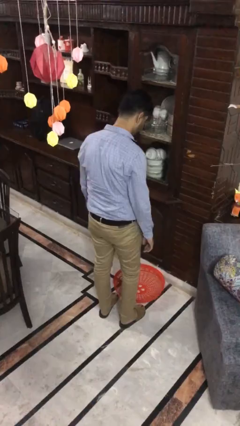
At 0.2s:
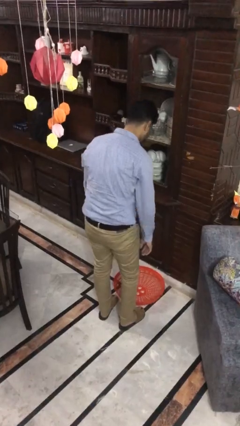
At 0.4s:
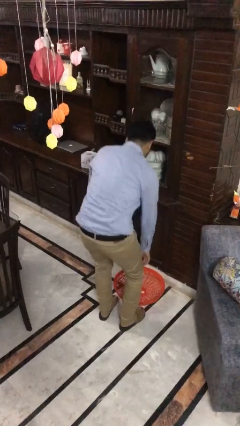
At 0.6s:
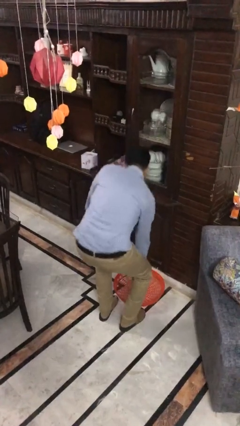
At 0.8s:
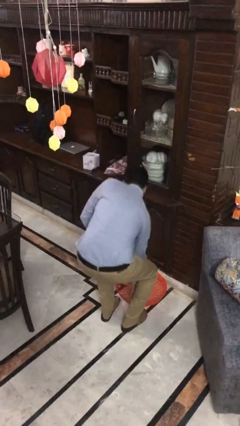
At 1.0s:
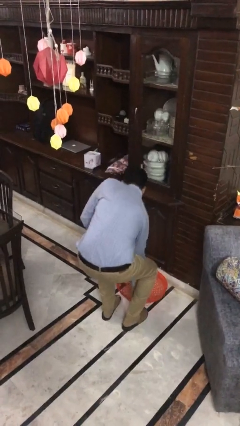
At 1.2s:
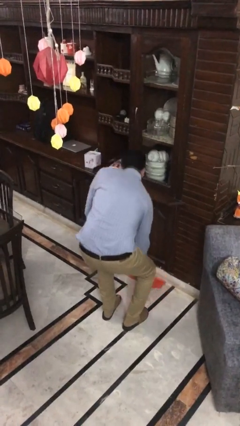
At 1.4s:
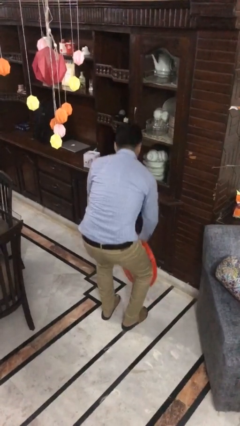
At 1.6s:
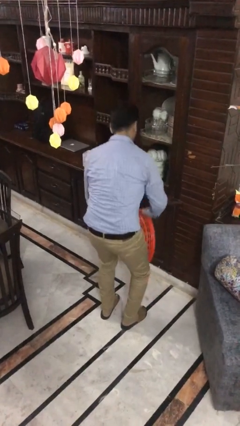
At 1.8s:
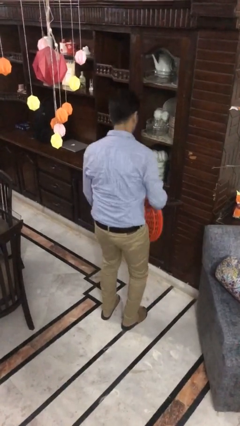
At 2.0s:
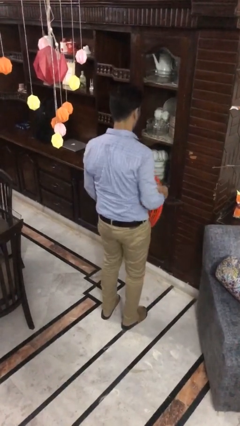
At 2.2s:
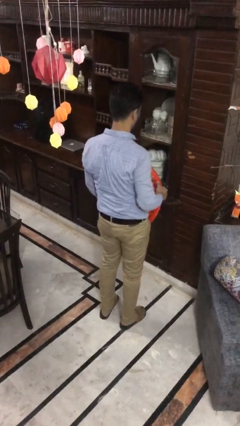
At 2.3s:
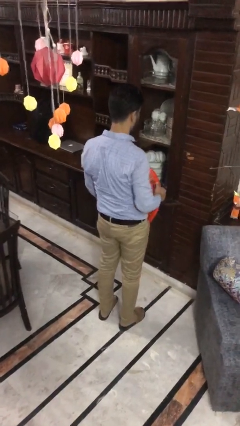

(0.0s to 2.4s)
person picks up object from floor

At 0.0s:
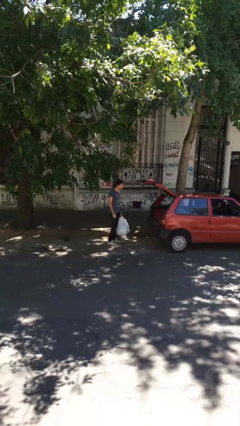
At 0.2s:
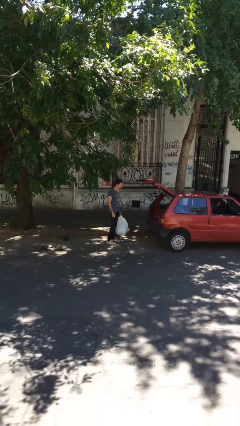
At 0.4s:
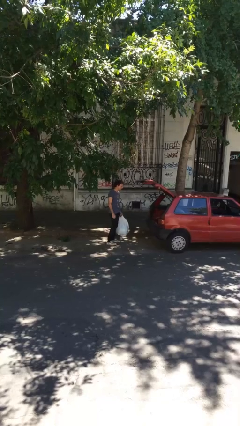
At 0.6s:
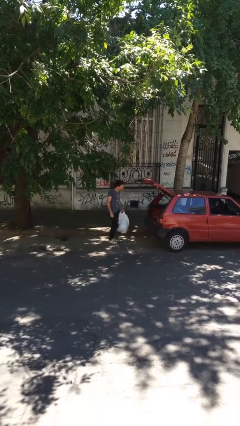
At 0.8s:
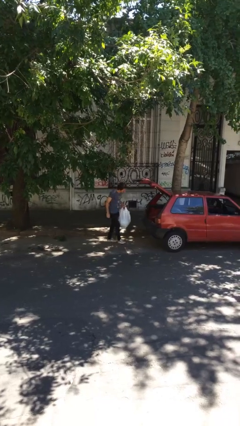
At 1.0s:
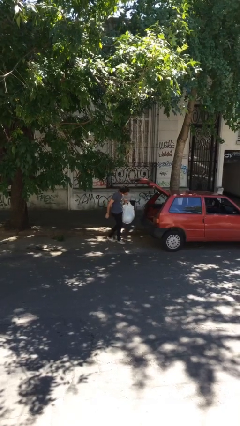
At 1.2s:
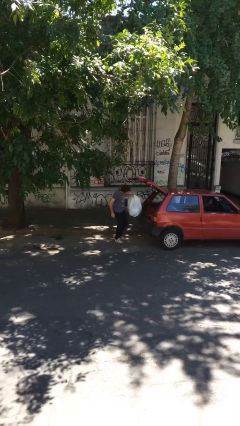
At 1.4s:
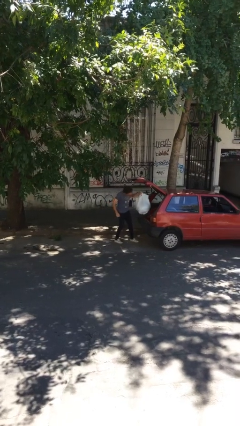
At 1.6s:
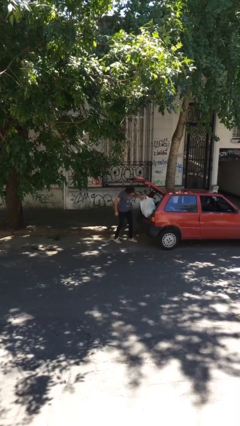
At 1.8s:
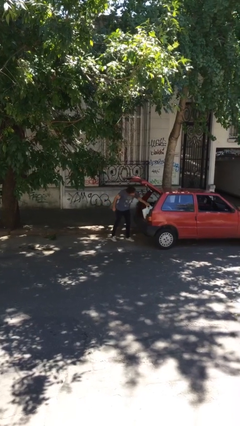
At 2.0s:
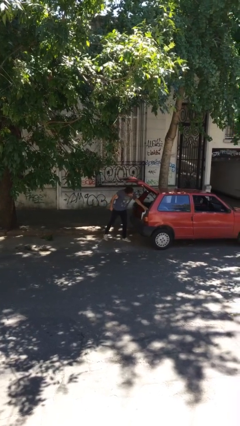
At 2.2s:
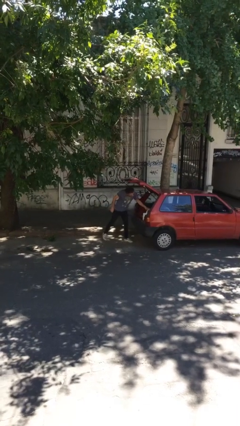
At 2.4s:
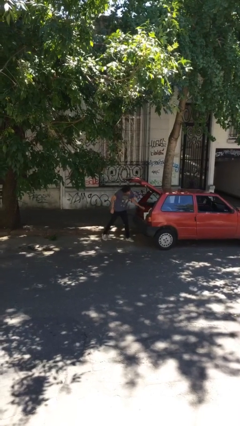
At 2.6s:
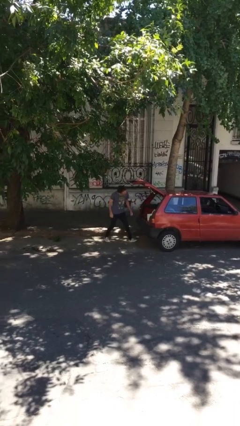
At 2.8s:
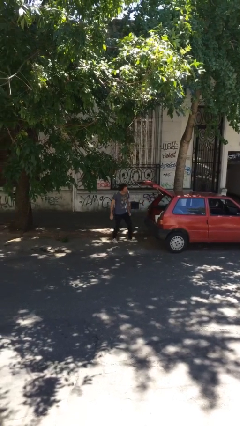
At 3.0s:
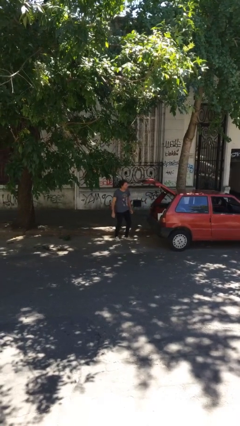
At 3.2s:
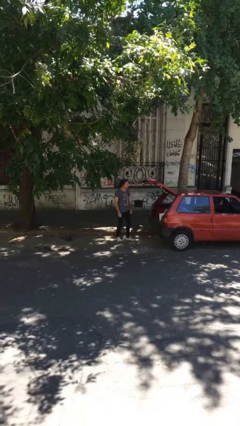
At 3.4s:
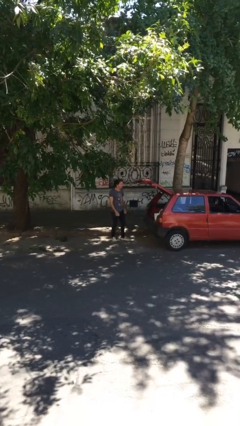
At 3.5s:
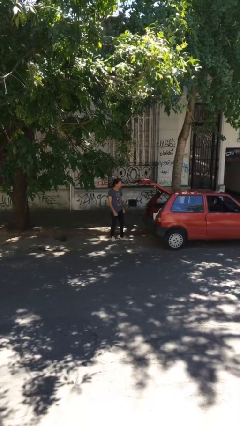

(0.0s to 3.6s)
person loads car

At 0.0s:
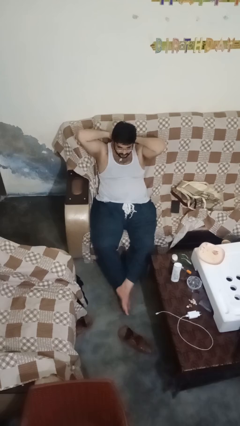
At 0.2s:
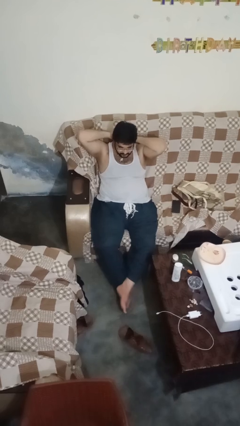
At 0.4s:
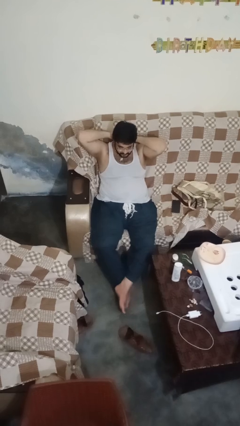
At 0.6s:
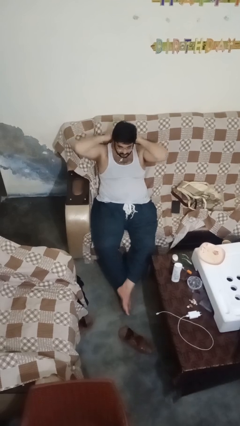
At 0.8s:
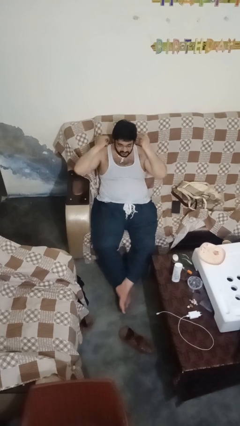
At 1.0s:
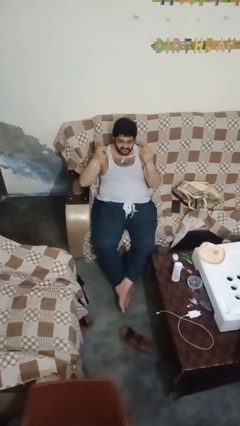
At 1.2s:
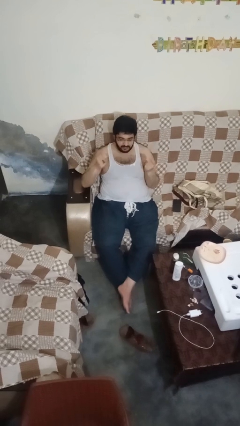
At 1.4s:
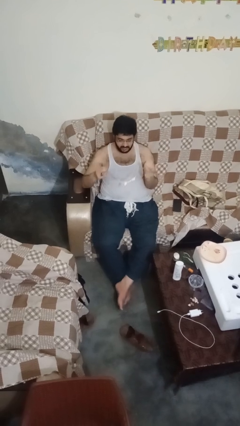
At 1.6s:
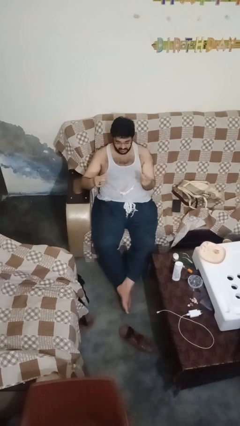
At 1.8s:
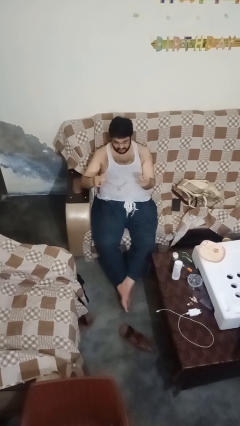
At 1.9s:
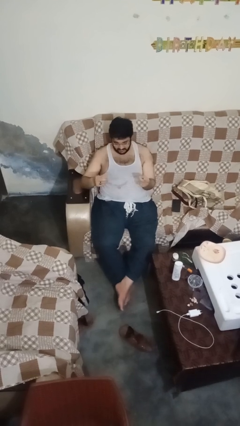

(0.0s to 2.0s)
person takes off necklace

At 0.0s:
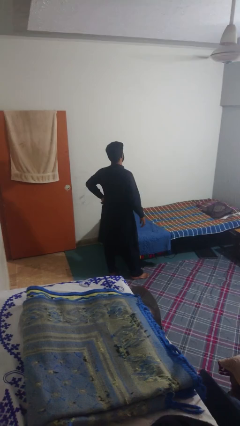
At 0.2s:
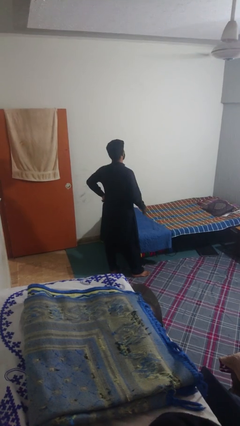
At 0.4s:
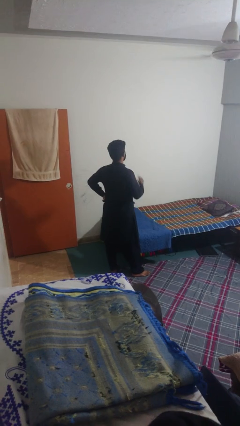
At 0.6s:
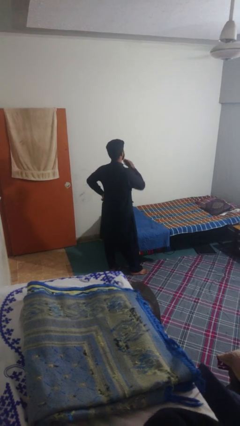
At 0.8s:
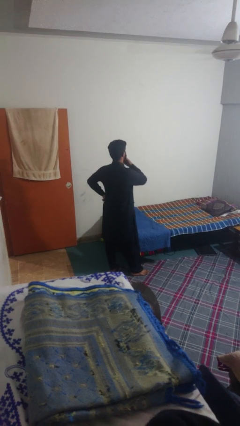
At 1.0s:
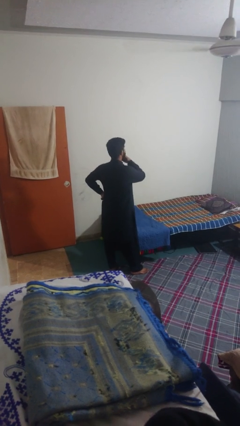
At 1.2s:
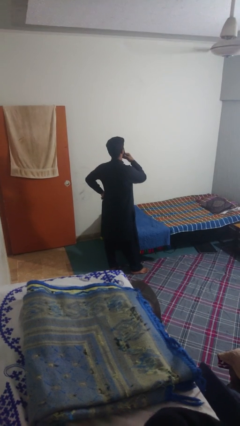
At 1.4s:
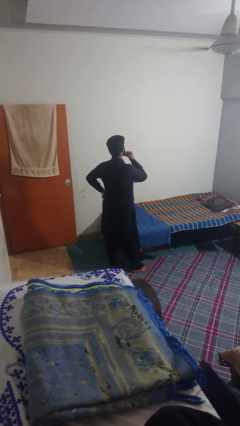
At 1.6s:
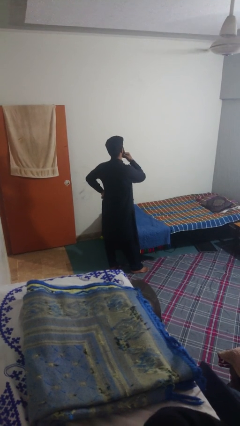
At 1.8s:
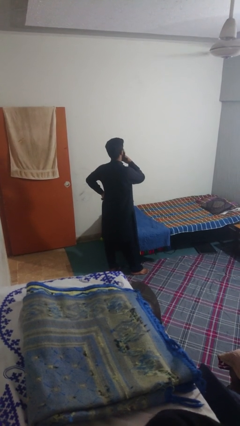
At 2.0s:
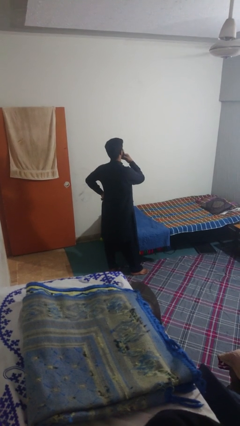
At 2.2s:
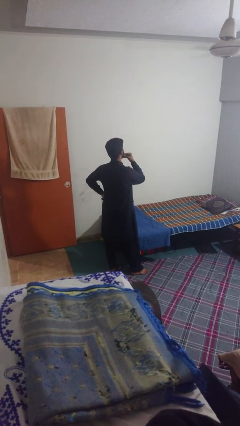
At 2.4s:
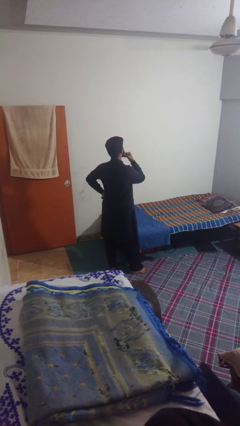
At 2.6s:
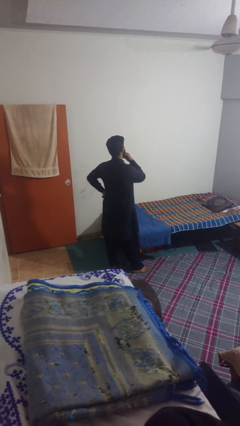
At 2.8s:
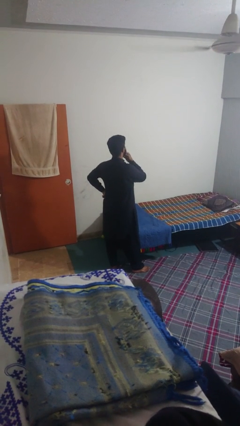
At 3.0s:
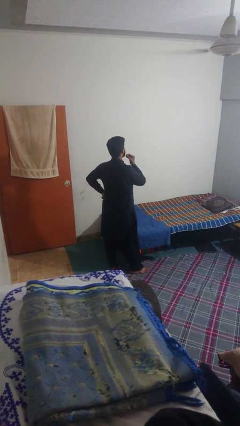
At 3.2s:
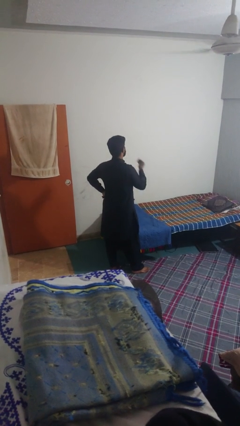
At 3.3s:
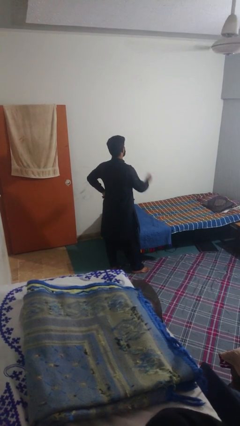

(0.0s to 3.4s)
person strokes chin

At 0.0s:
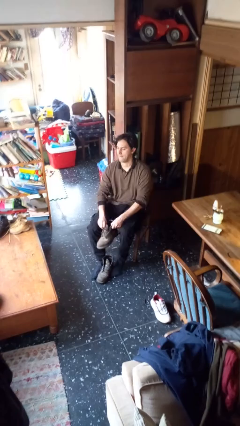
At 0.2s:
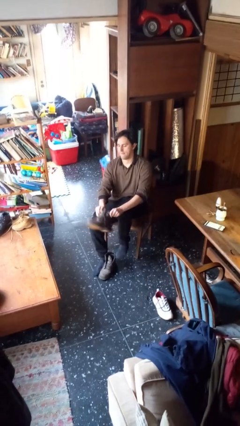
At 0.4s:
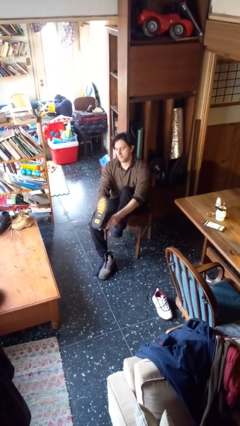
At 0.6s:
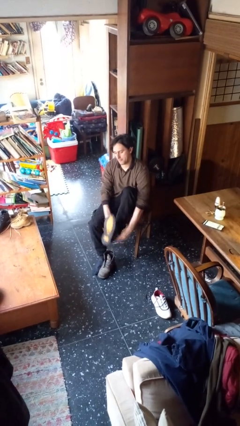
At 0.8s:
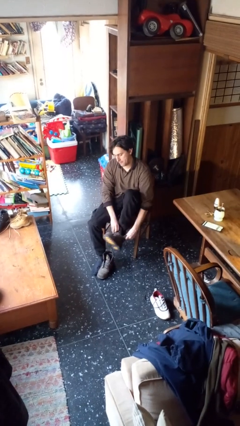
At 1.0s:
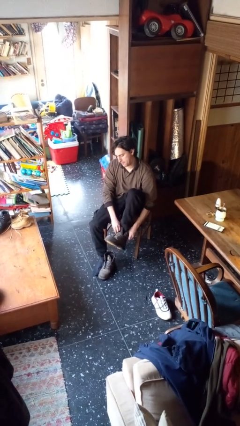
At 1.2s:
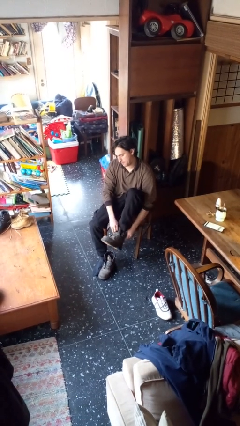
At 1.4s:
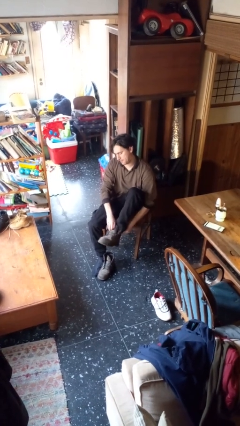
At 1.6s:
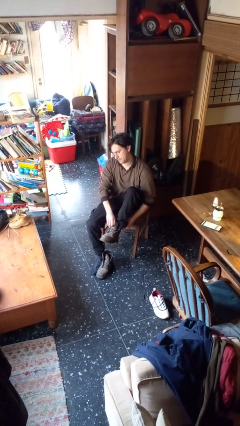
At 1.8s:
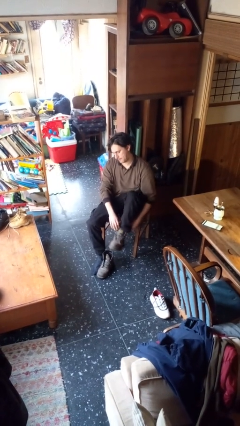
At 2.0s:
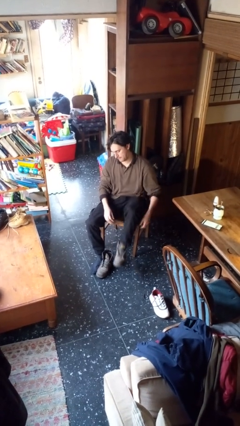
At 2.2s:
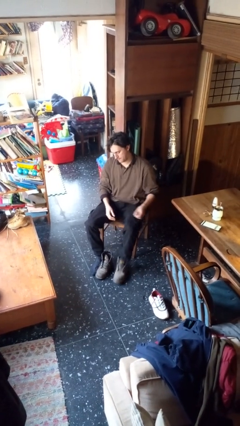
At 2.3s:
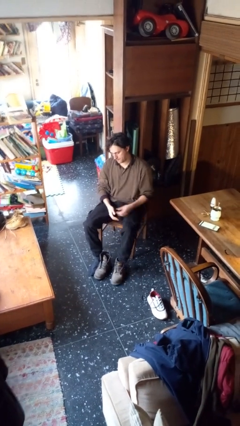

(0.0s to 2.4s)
person puts on boots

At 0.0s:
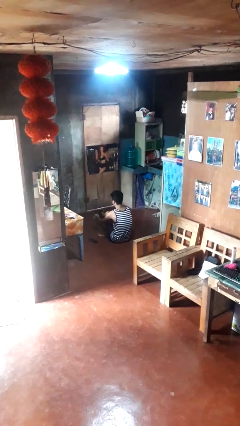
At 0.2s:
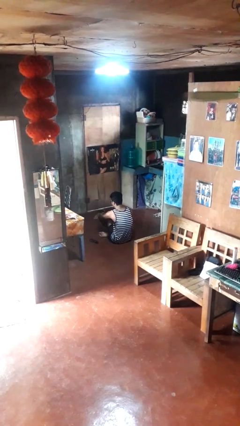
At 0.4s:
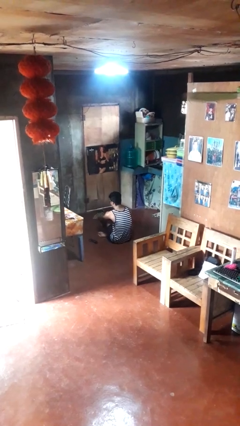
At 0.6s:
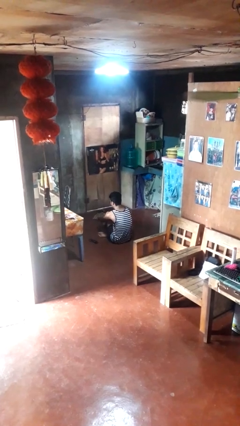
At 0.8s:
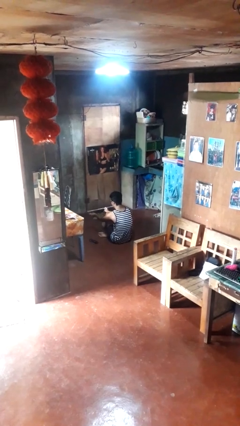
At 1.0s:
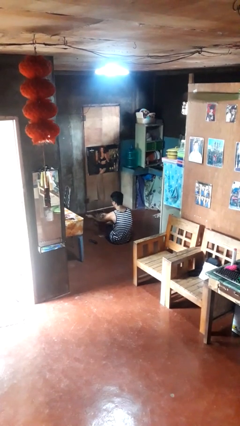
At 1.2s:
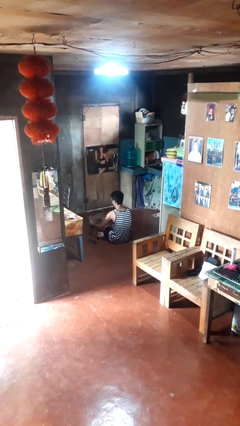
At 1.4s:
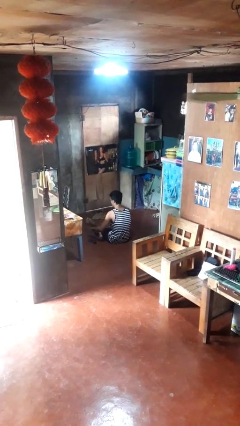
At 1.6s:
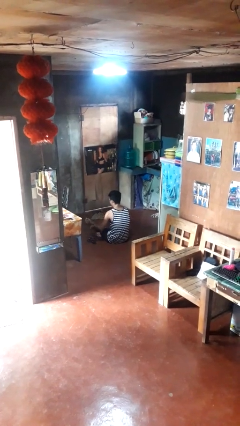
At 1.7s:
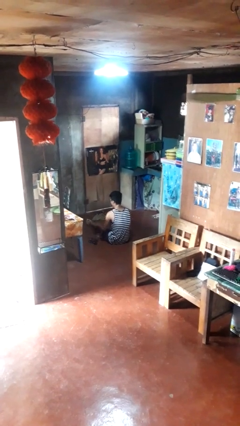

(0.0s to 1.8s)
person takes off socks

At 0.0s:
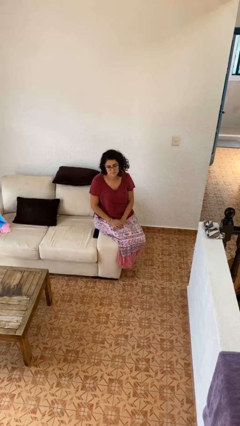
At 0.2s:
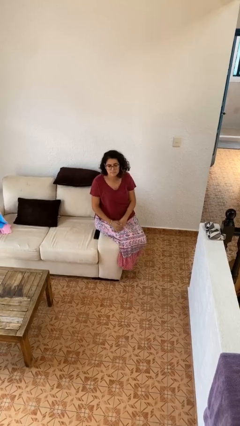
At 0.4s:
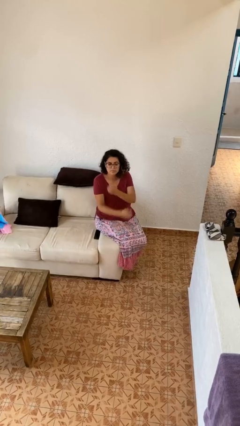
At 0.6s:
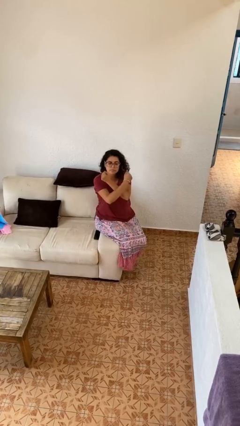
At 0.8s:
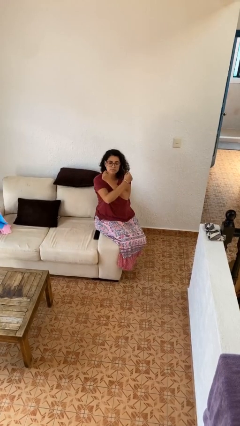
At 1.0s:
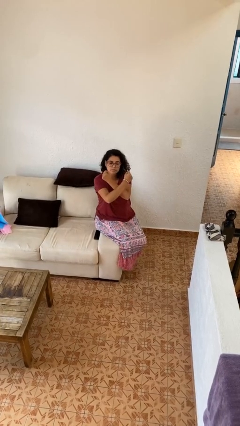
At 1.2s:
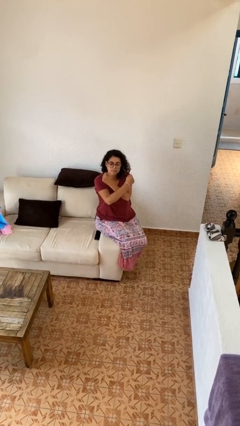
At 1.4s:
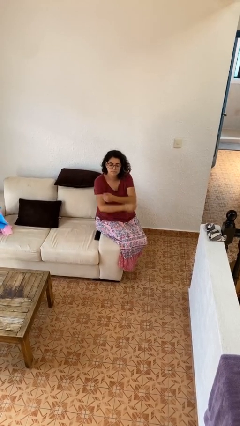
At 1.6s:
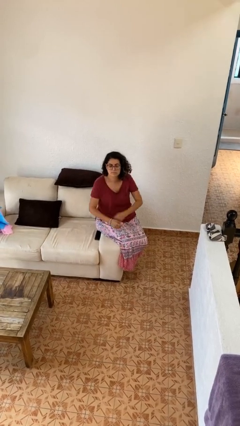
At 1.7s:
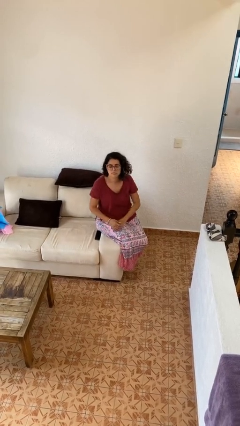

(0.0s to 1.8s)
person gestures arms x
